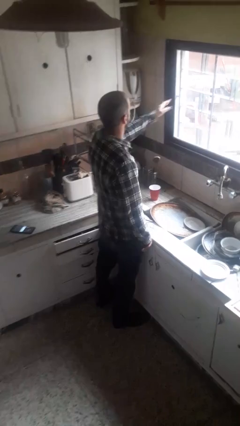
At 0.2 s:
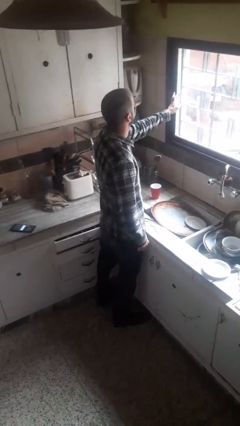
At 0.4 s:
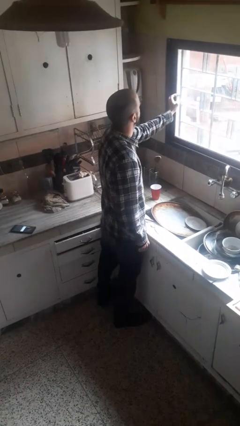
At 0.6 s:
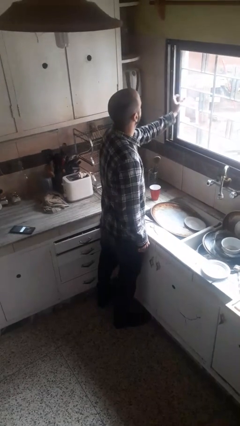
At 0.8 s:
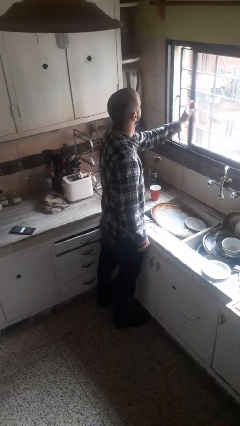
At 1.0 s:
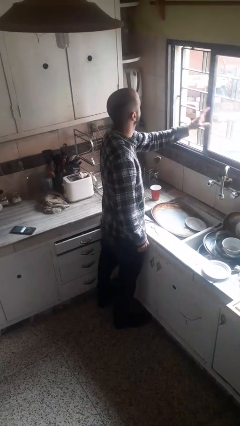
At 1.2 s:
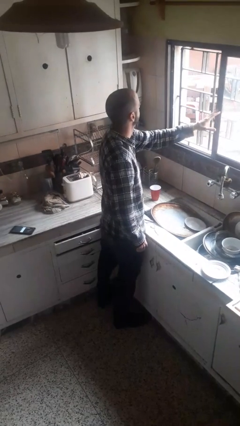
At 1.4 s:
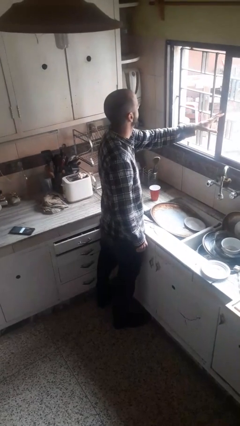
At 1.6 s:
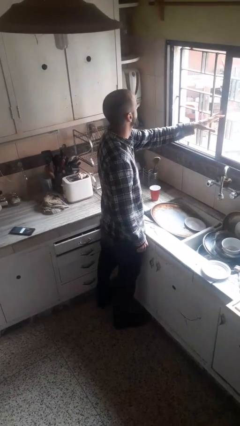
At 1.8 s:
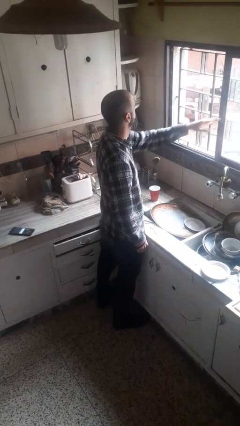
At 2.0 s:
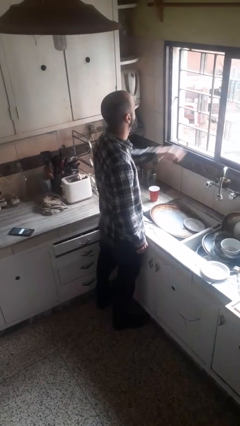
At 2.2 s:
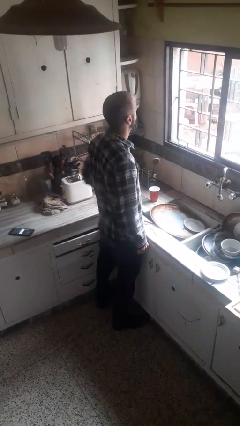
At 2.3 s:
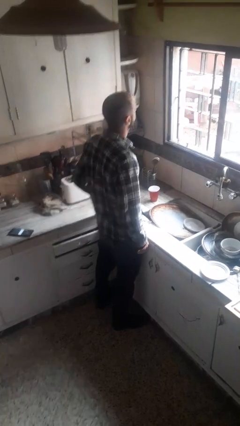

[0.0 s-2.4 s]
person opens home window

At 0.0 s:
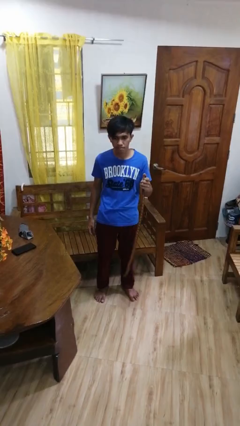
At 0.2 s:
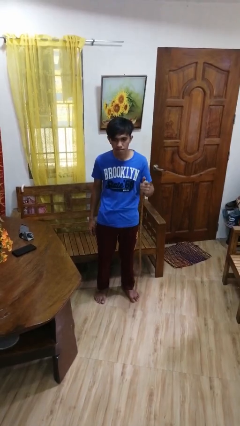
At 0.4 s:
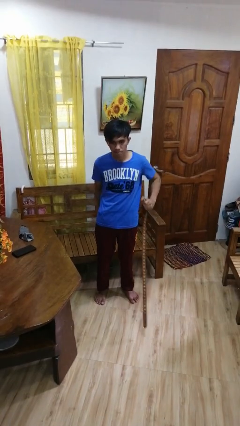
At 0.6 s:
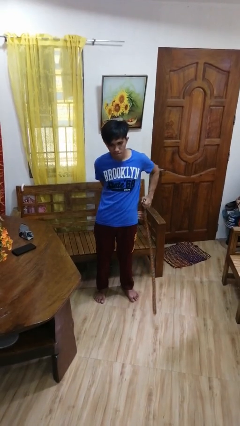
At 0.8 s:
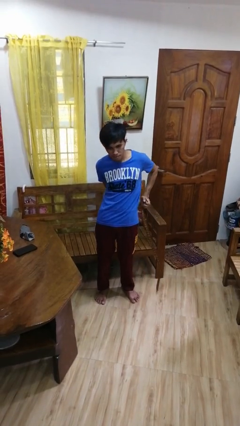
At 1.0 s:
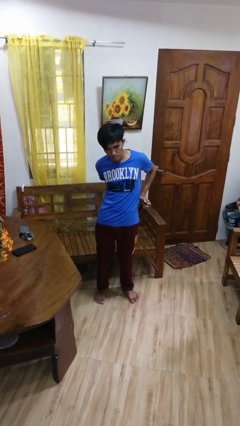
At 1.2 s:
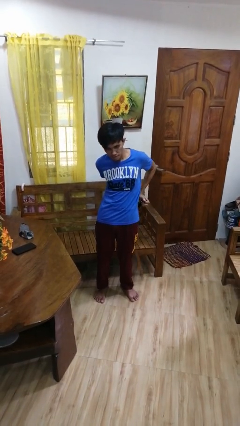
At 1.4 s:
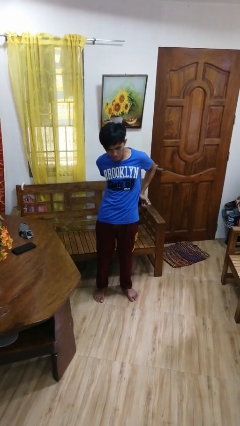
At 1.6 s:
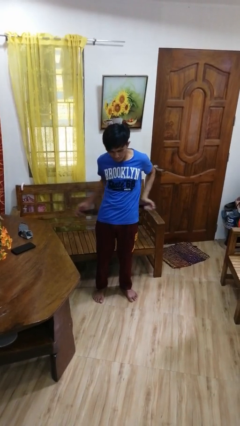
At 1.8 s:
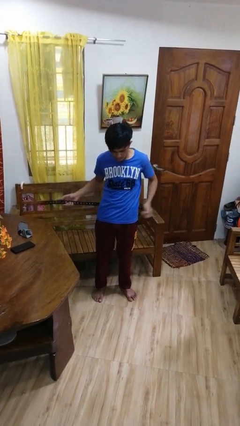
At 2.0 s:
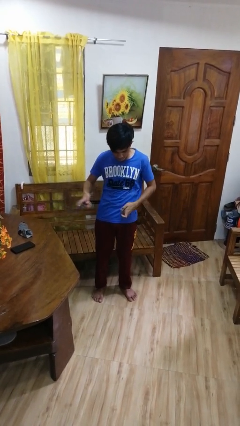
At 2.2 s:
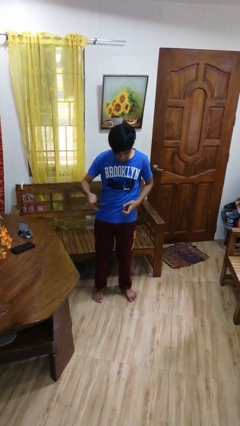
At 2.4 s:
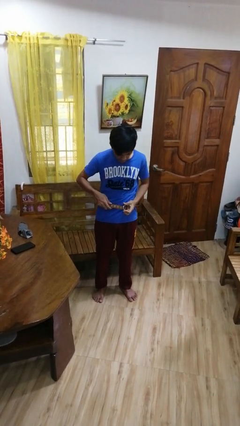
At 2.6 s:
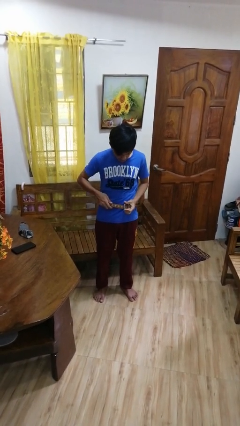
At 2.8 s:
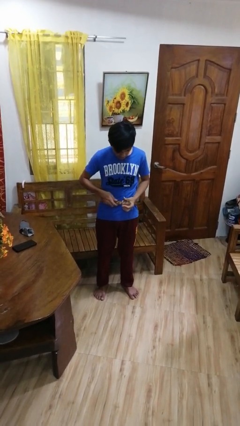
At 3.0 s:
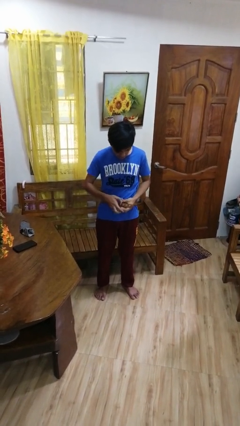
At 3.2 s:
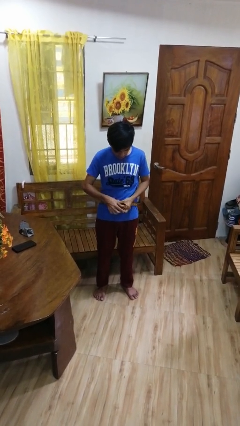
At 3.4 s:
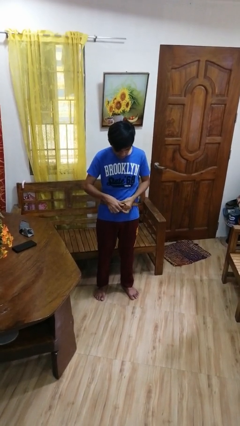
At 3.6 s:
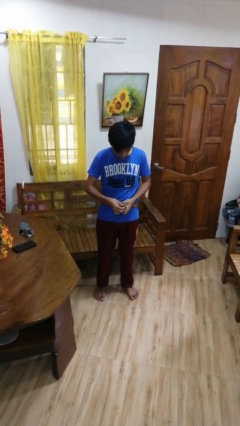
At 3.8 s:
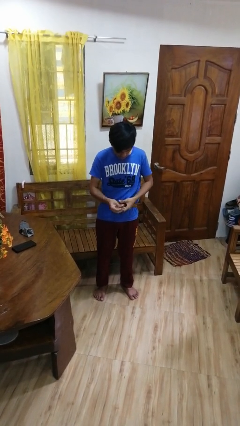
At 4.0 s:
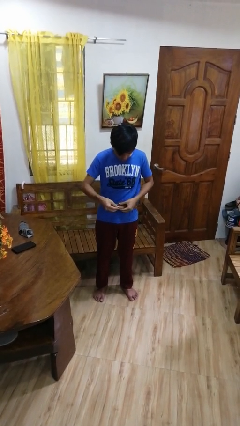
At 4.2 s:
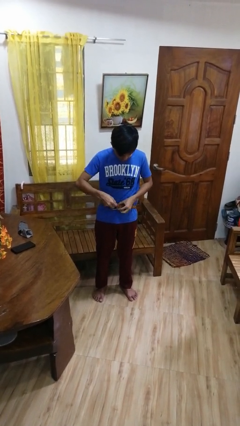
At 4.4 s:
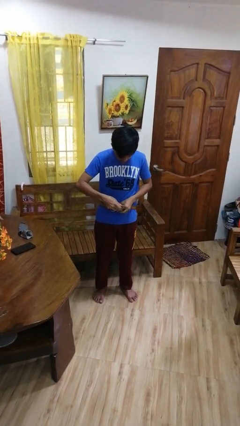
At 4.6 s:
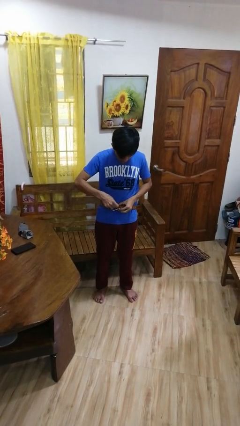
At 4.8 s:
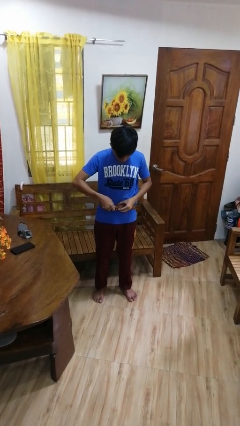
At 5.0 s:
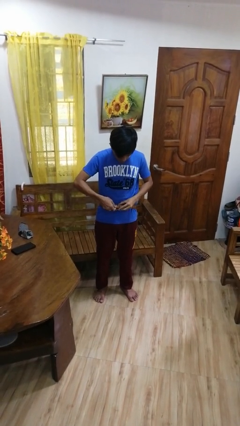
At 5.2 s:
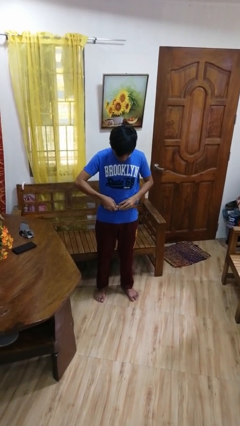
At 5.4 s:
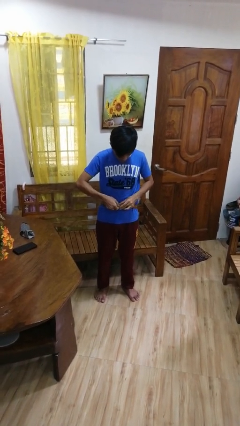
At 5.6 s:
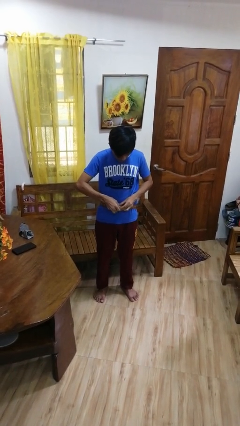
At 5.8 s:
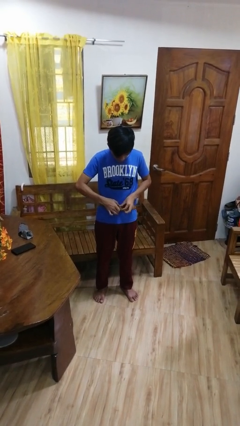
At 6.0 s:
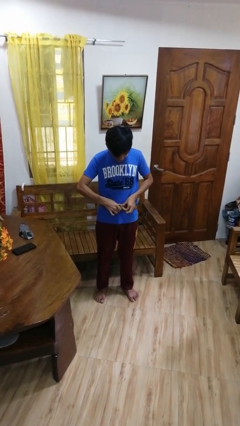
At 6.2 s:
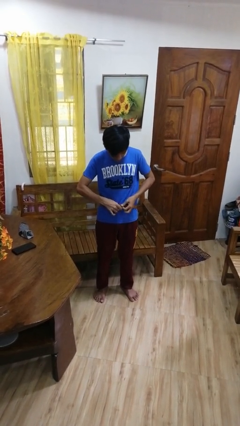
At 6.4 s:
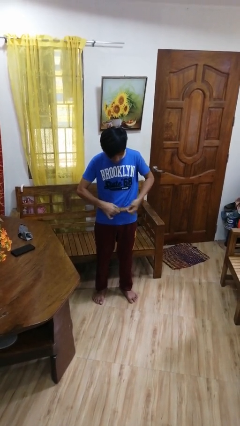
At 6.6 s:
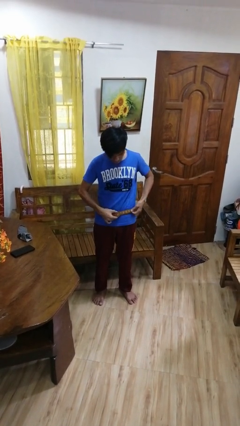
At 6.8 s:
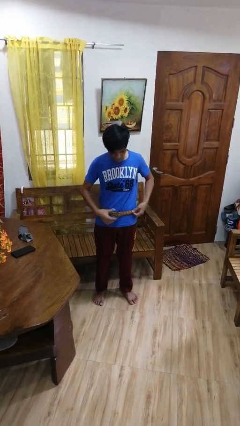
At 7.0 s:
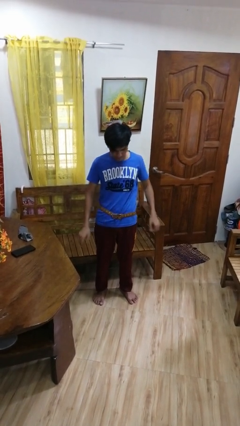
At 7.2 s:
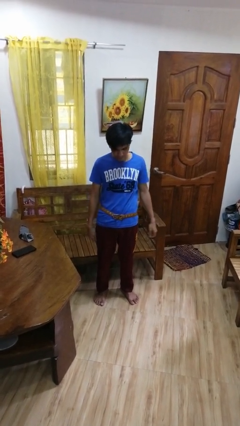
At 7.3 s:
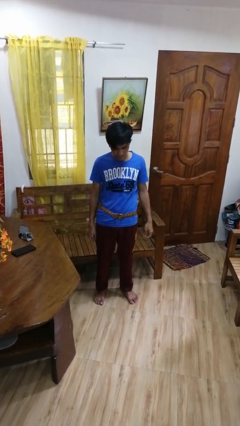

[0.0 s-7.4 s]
person puts on belt

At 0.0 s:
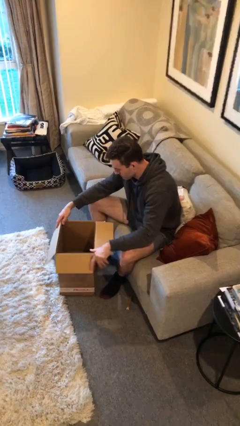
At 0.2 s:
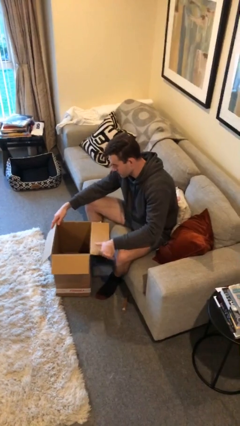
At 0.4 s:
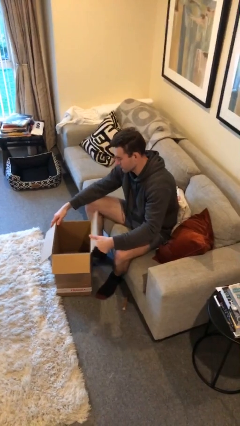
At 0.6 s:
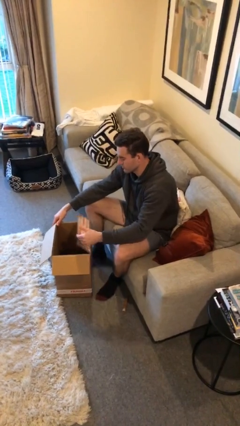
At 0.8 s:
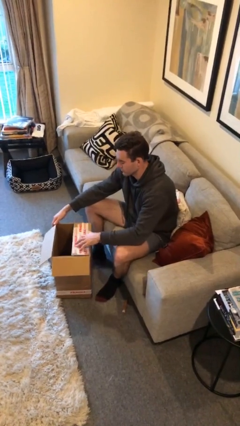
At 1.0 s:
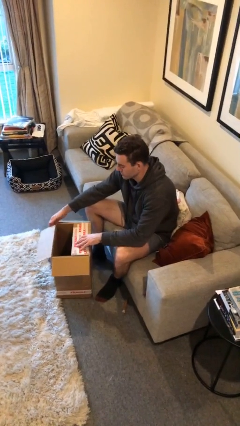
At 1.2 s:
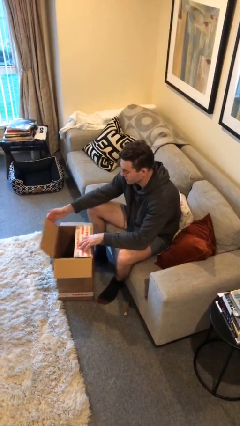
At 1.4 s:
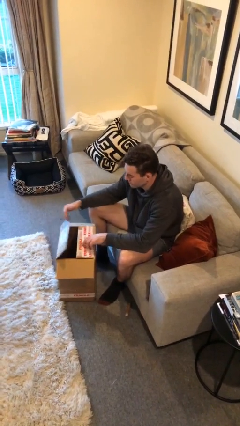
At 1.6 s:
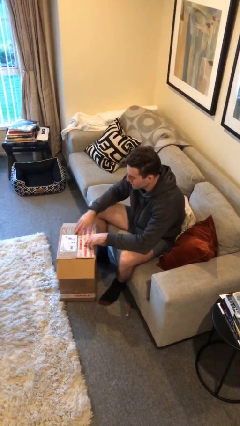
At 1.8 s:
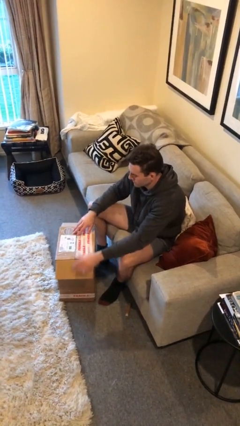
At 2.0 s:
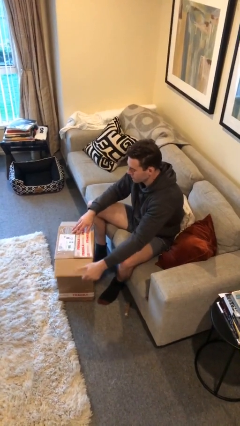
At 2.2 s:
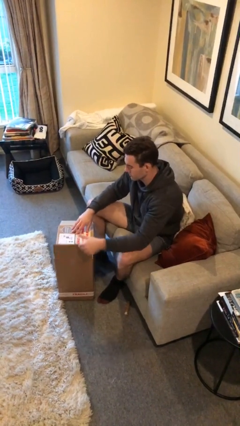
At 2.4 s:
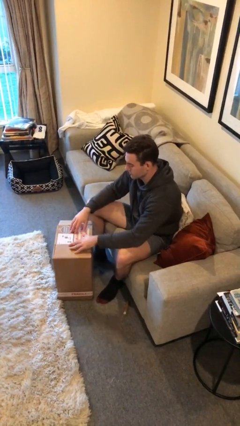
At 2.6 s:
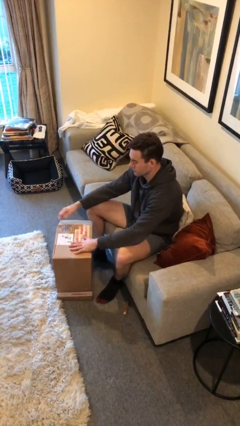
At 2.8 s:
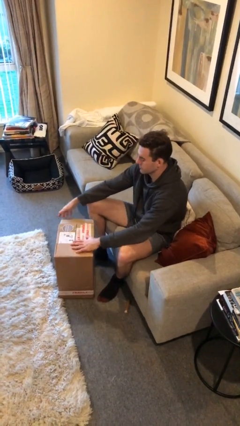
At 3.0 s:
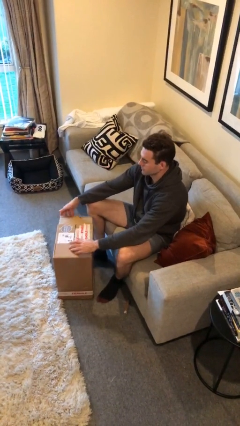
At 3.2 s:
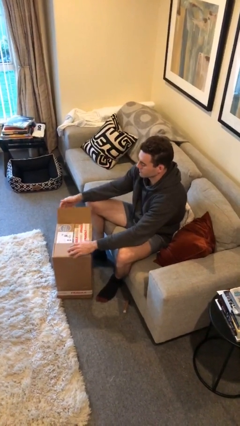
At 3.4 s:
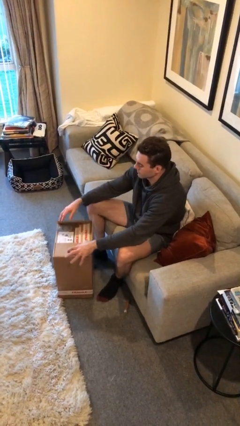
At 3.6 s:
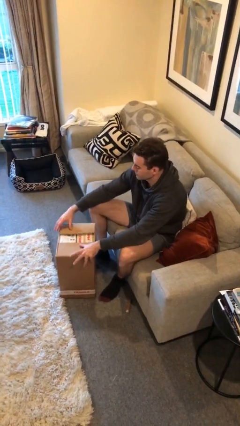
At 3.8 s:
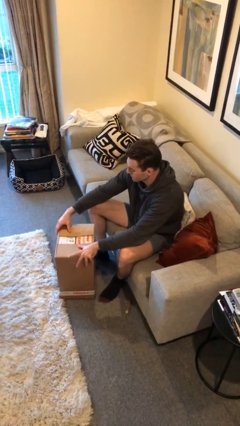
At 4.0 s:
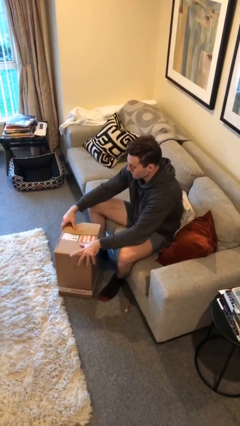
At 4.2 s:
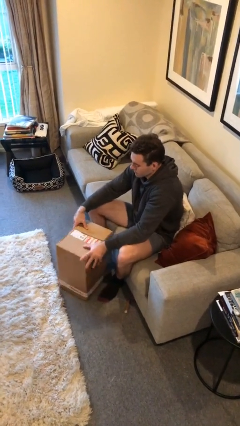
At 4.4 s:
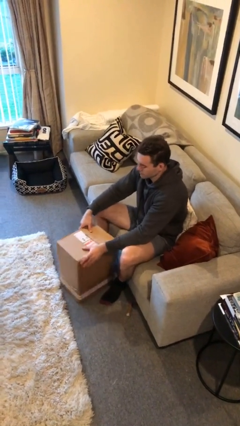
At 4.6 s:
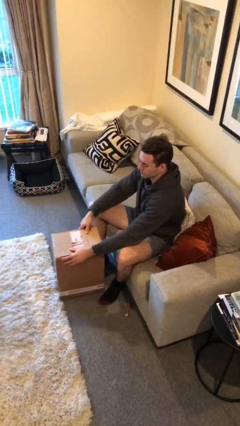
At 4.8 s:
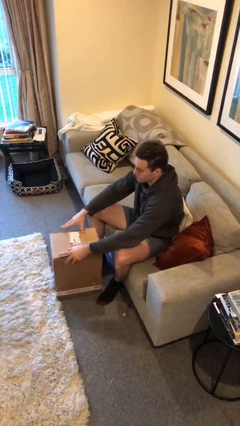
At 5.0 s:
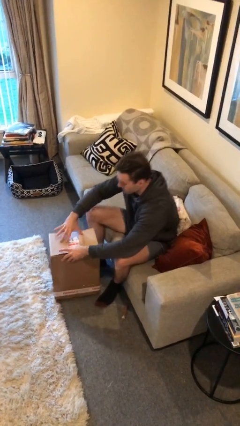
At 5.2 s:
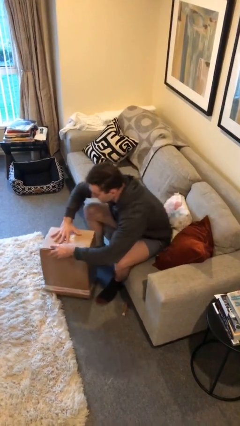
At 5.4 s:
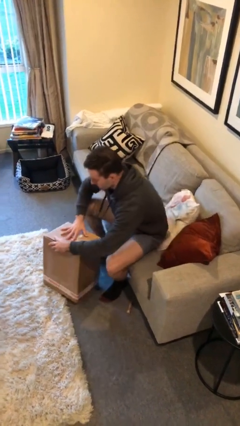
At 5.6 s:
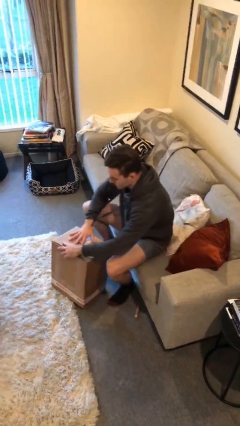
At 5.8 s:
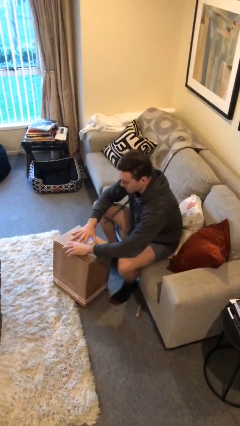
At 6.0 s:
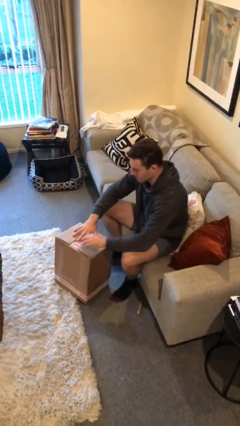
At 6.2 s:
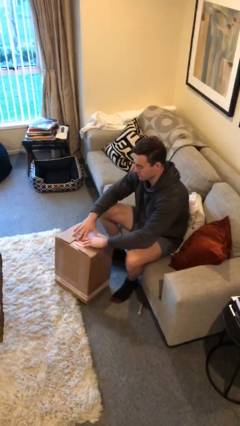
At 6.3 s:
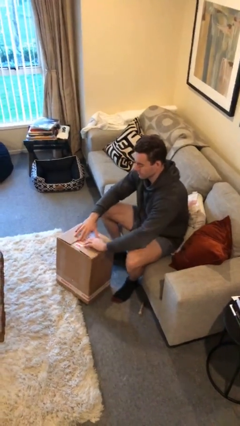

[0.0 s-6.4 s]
person closes box

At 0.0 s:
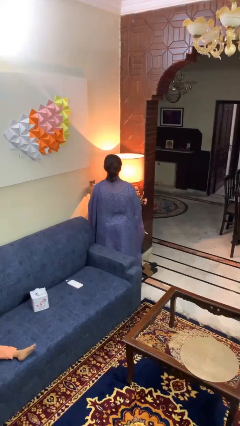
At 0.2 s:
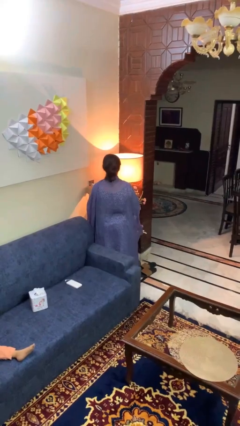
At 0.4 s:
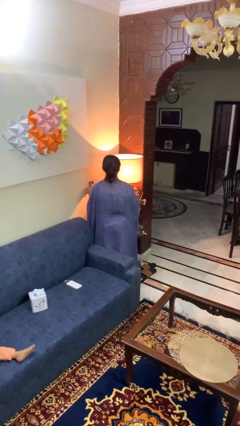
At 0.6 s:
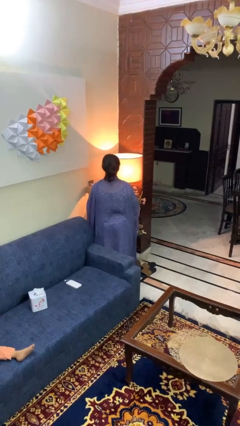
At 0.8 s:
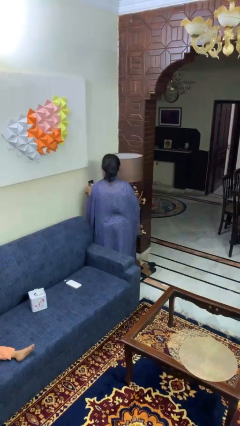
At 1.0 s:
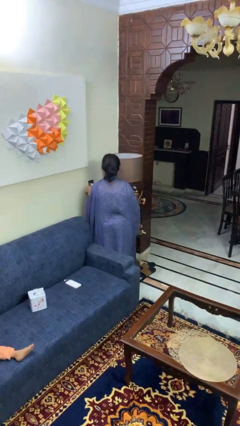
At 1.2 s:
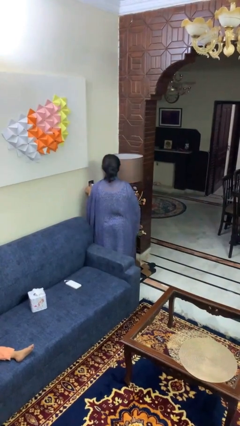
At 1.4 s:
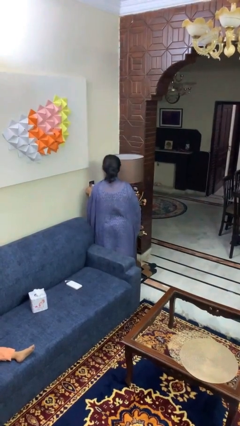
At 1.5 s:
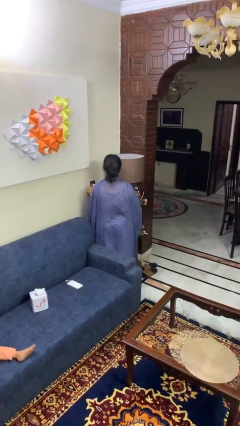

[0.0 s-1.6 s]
person turns off lamp
